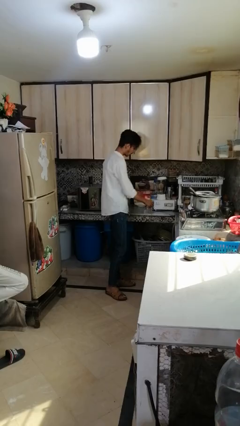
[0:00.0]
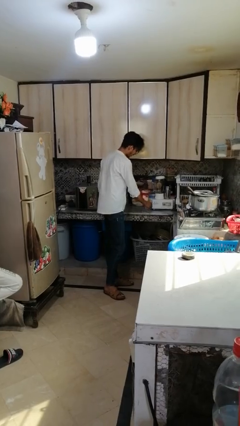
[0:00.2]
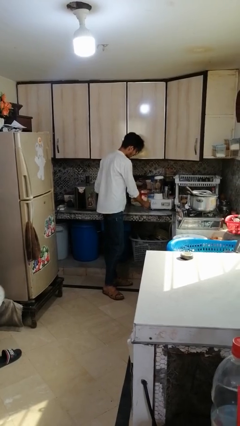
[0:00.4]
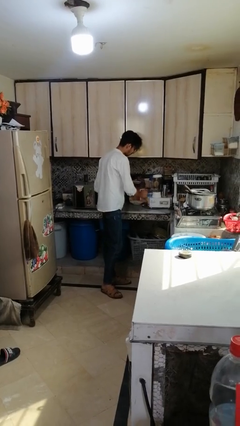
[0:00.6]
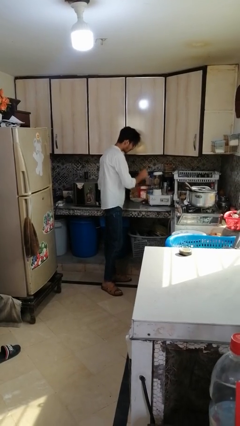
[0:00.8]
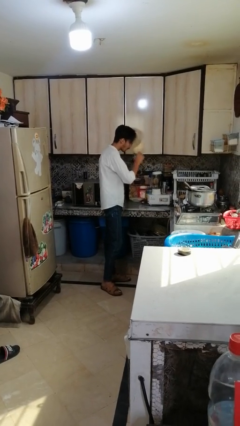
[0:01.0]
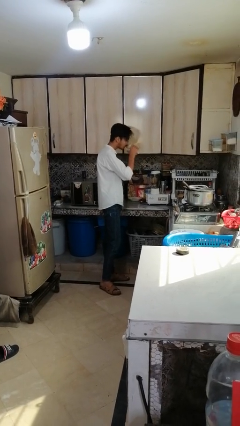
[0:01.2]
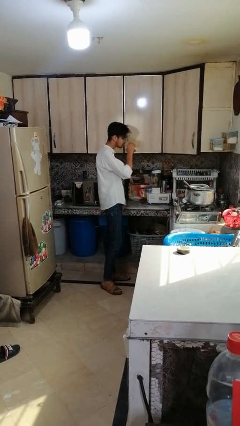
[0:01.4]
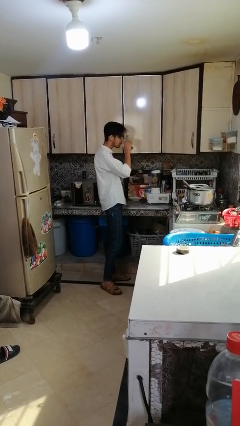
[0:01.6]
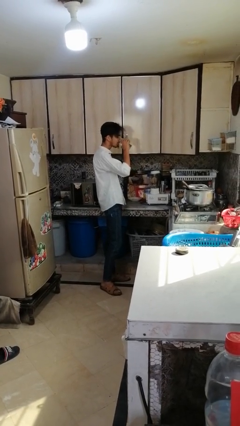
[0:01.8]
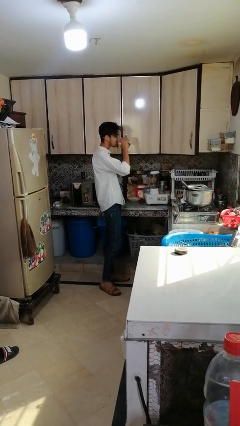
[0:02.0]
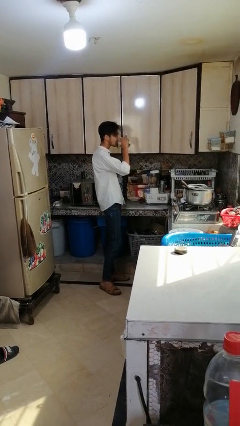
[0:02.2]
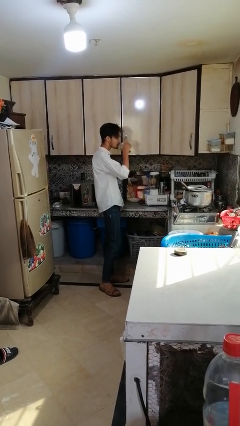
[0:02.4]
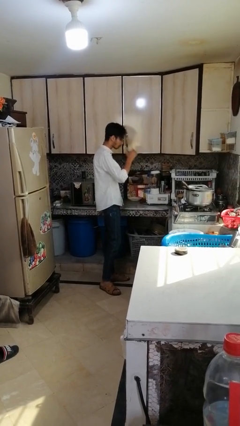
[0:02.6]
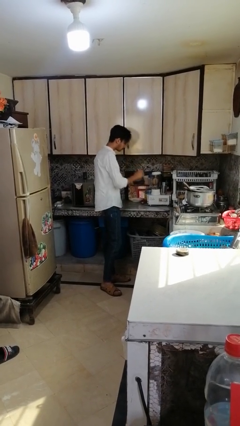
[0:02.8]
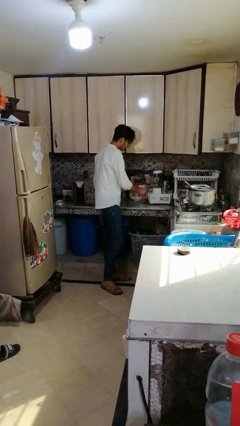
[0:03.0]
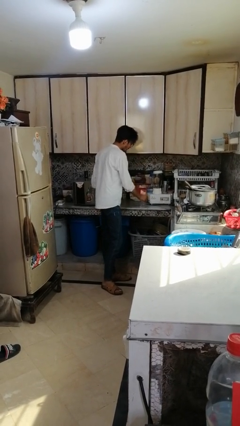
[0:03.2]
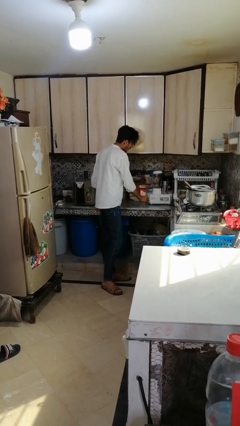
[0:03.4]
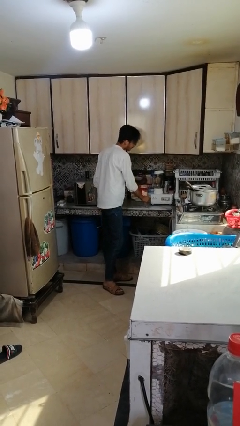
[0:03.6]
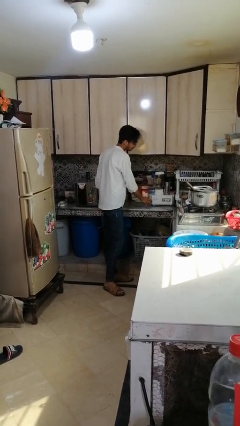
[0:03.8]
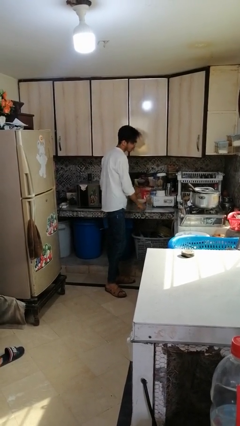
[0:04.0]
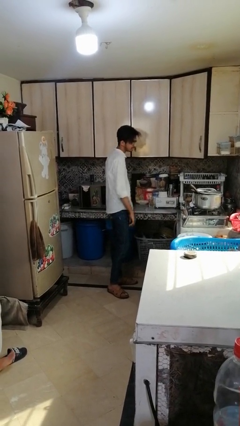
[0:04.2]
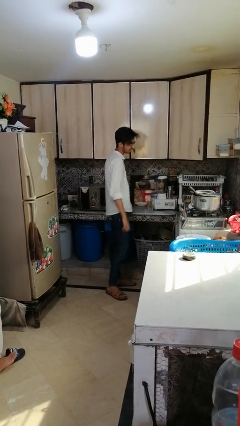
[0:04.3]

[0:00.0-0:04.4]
person drinks from cup

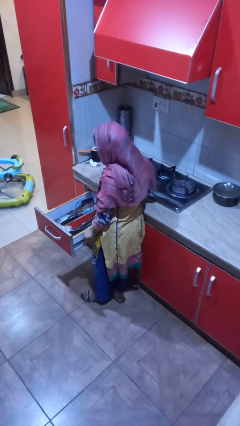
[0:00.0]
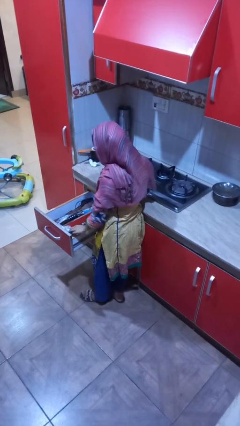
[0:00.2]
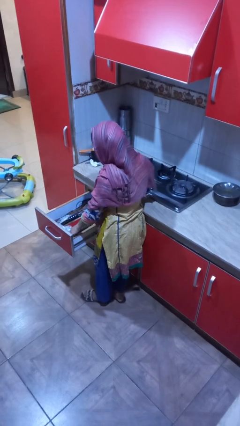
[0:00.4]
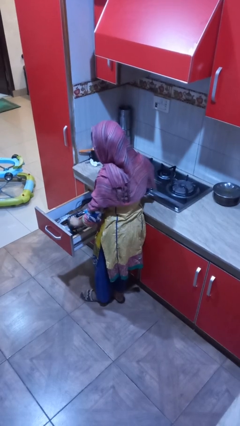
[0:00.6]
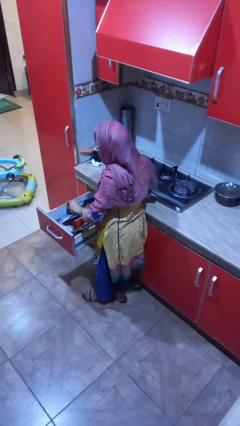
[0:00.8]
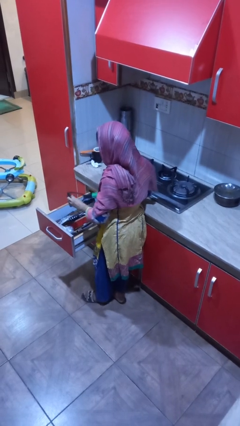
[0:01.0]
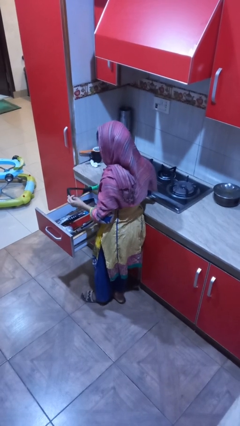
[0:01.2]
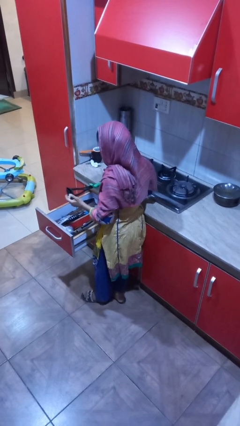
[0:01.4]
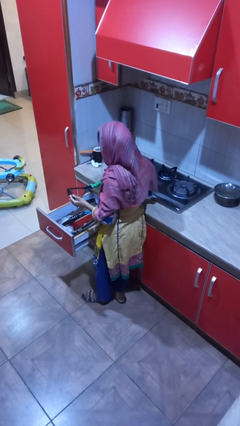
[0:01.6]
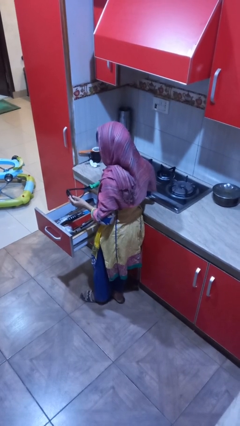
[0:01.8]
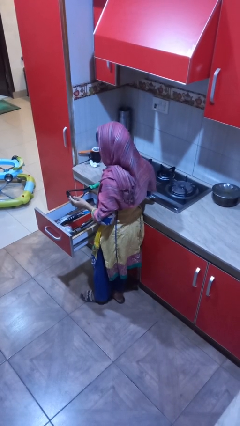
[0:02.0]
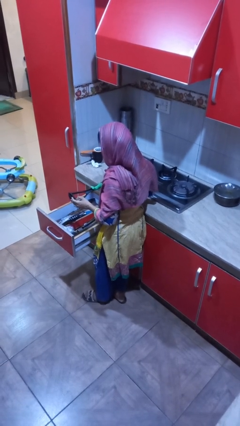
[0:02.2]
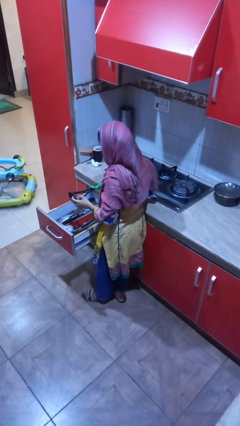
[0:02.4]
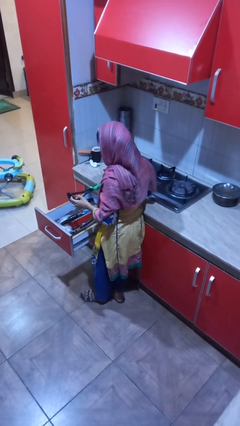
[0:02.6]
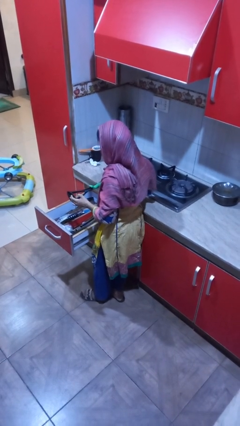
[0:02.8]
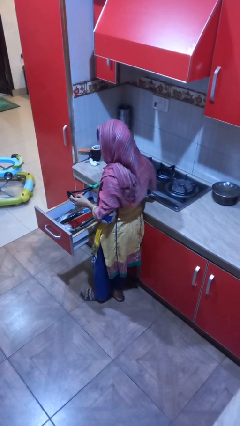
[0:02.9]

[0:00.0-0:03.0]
person takes object from kitchen drawer

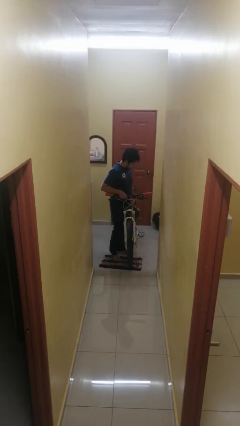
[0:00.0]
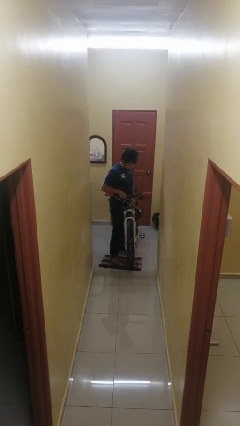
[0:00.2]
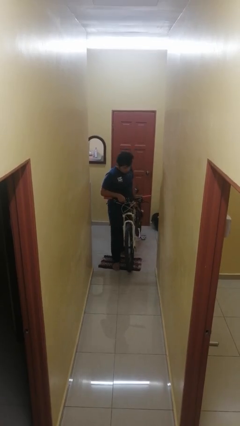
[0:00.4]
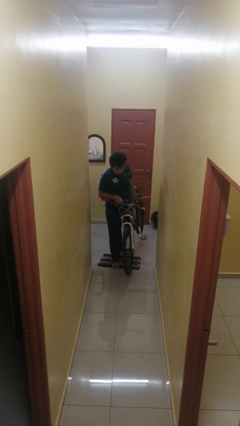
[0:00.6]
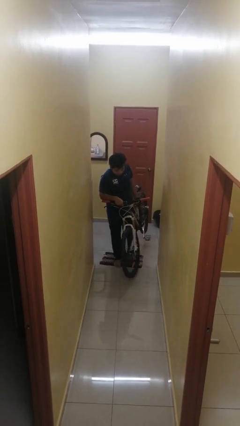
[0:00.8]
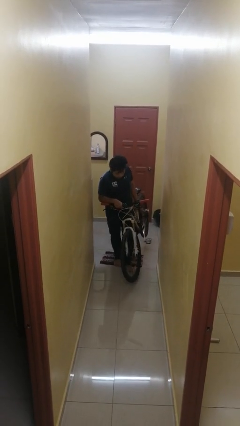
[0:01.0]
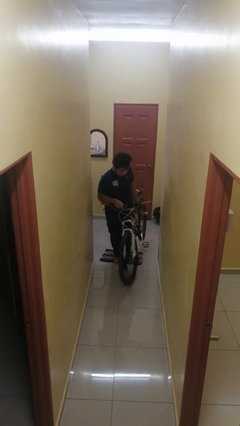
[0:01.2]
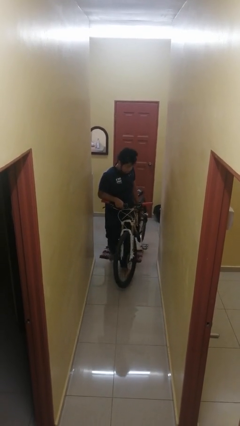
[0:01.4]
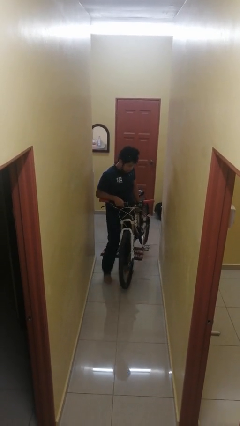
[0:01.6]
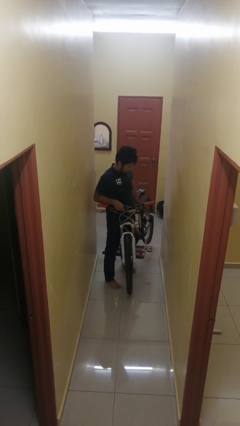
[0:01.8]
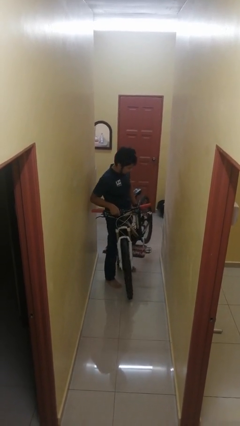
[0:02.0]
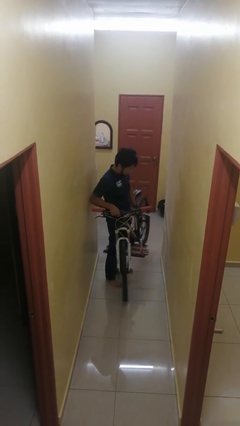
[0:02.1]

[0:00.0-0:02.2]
person carries bicycle

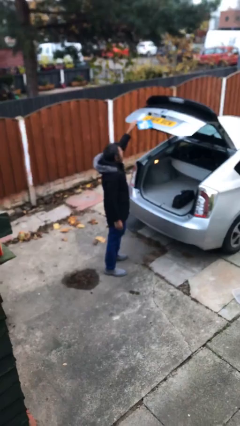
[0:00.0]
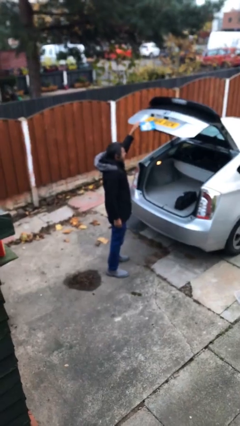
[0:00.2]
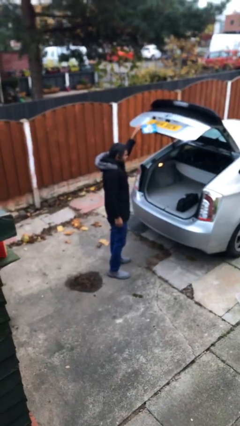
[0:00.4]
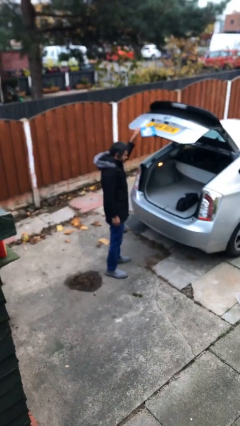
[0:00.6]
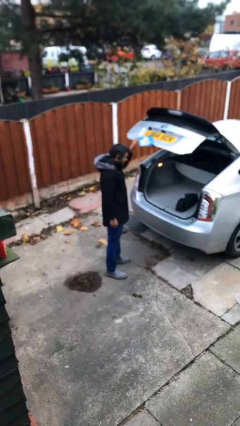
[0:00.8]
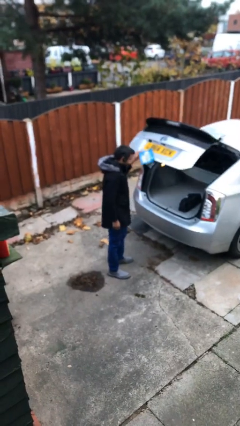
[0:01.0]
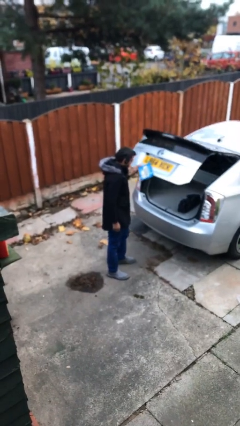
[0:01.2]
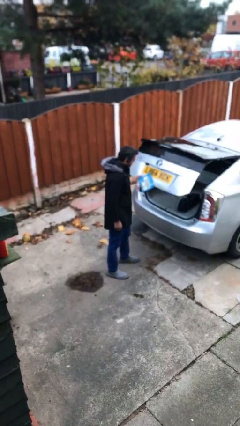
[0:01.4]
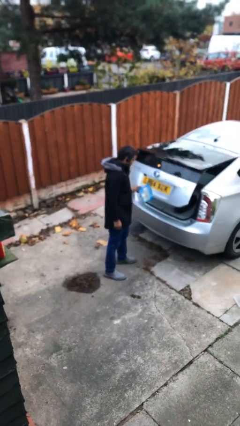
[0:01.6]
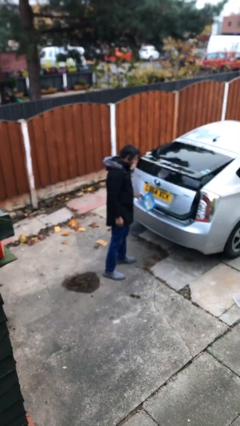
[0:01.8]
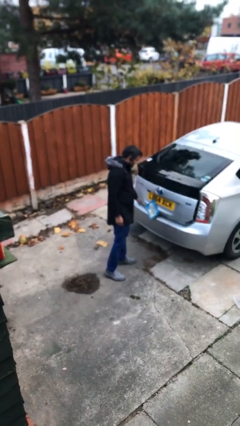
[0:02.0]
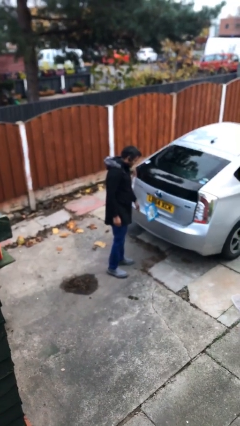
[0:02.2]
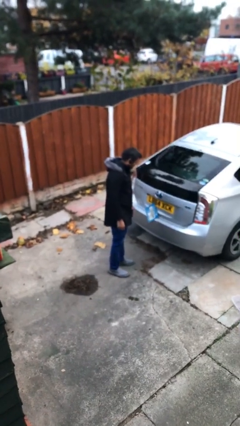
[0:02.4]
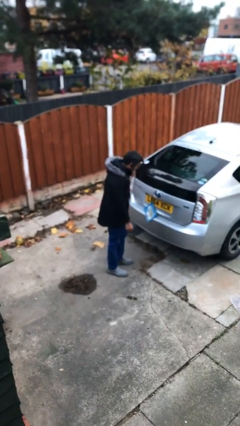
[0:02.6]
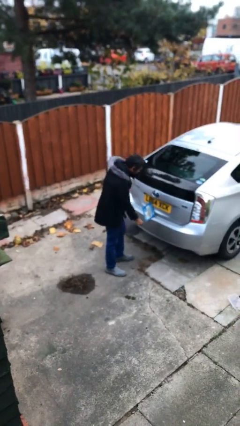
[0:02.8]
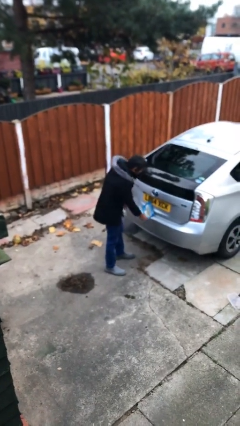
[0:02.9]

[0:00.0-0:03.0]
person closes car trunk

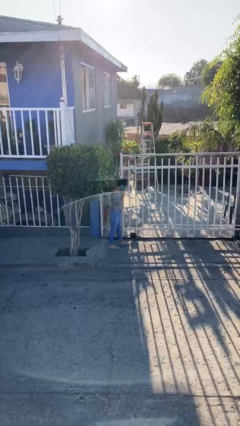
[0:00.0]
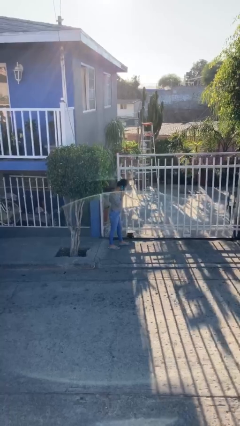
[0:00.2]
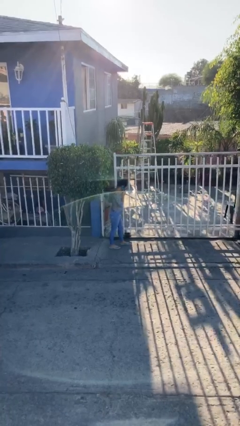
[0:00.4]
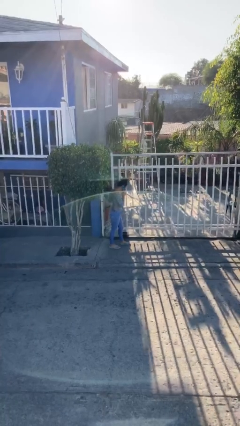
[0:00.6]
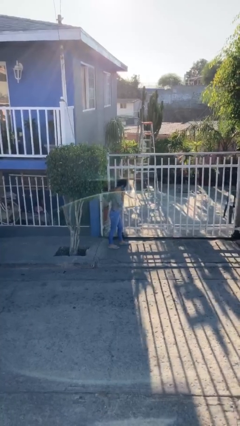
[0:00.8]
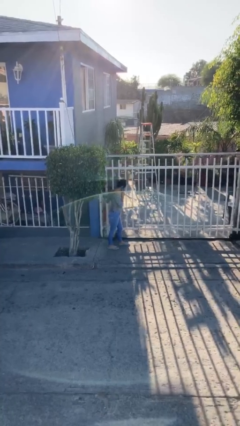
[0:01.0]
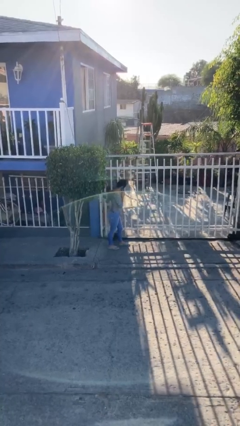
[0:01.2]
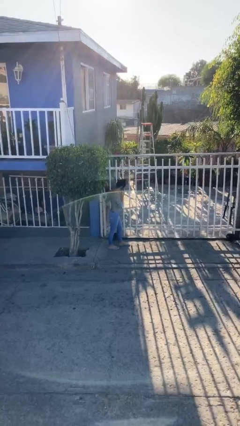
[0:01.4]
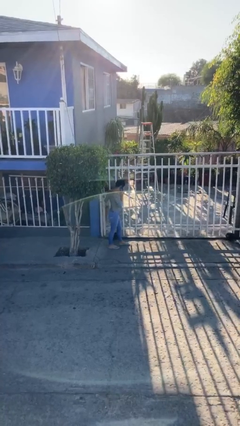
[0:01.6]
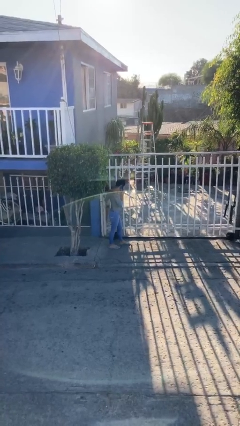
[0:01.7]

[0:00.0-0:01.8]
person closes facility door

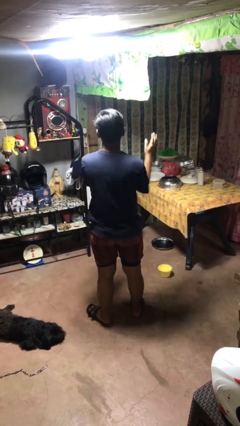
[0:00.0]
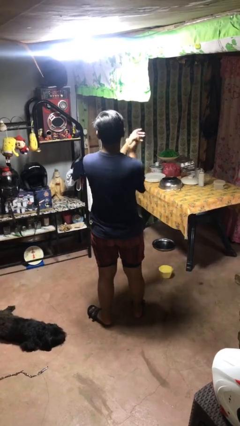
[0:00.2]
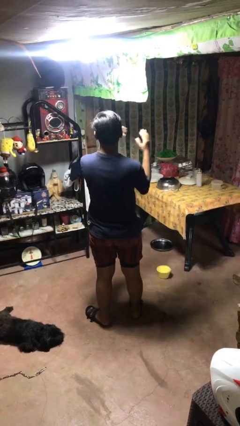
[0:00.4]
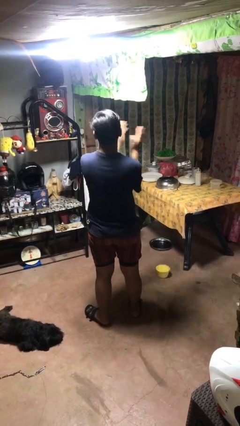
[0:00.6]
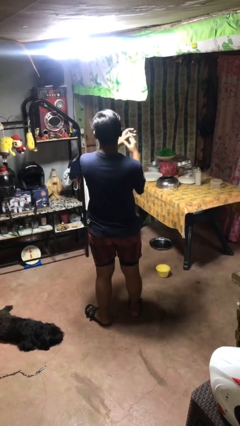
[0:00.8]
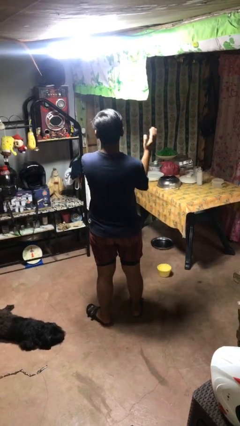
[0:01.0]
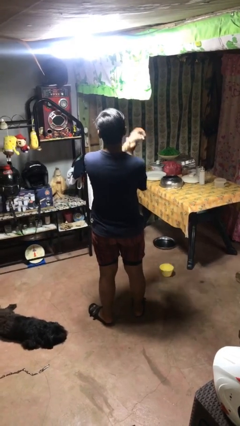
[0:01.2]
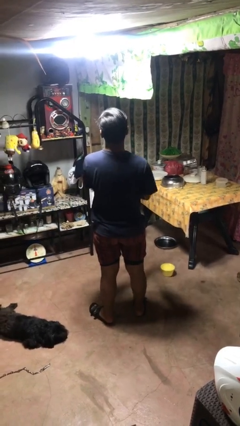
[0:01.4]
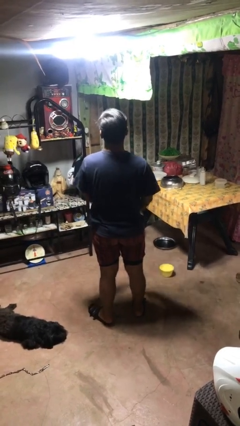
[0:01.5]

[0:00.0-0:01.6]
person claps hands

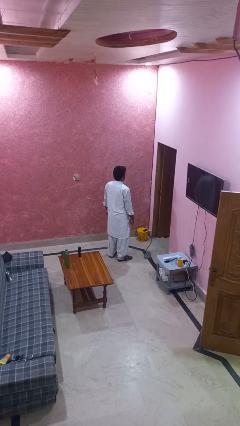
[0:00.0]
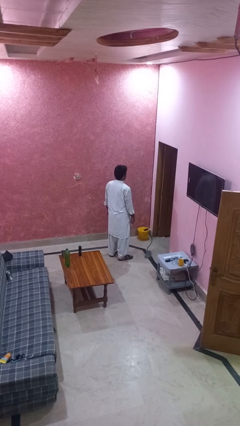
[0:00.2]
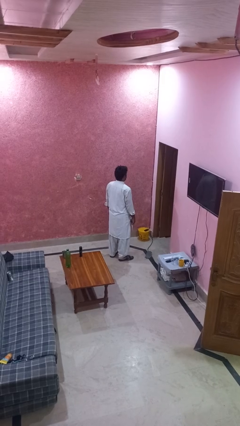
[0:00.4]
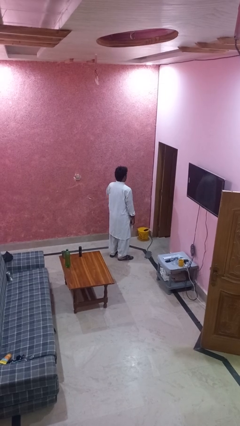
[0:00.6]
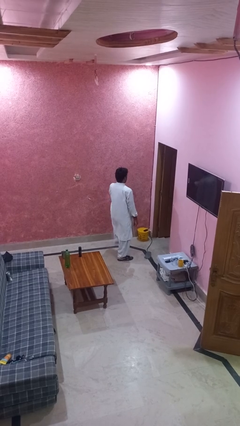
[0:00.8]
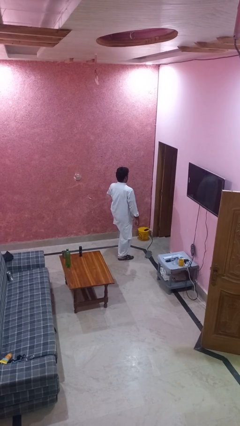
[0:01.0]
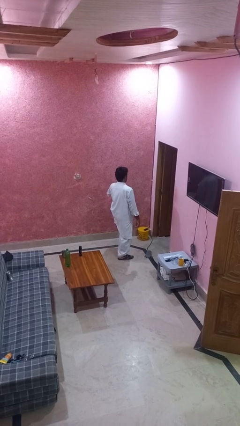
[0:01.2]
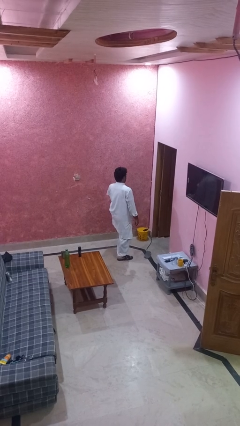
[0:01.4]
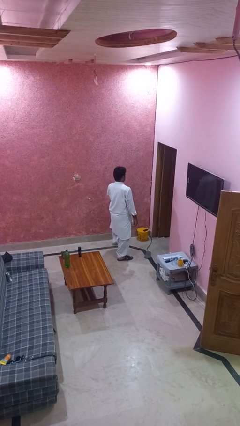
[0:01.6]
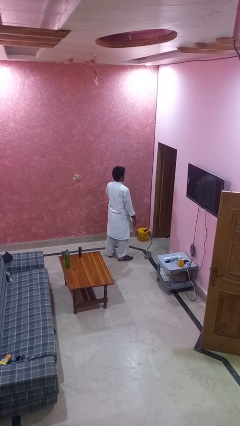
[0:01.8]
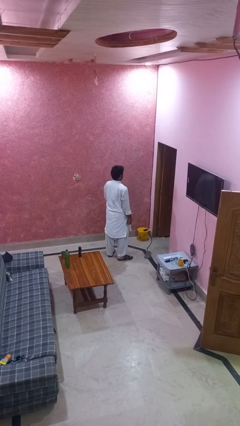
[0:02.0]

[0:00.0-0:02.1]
person slaps hands on thighs
